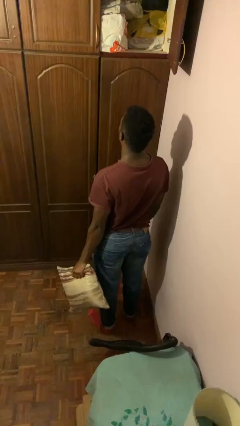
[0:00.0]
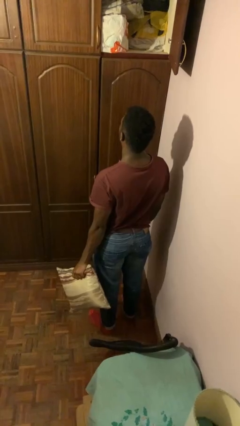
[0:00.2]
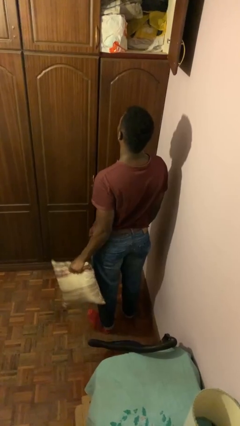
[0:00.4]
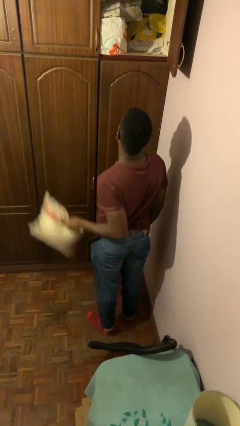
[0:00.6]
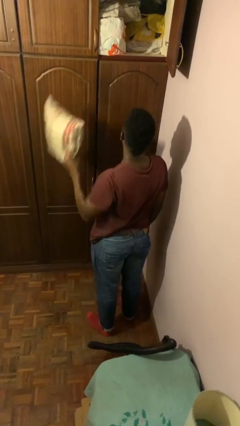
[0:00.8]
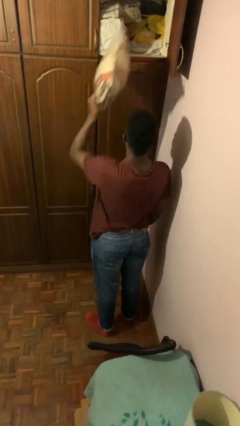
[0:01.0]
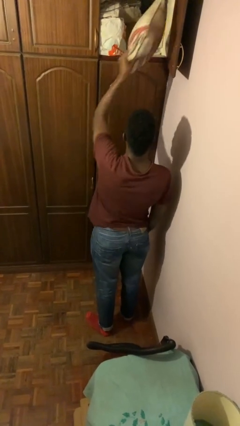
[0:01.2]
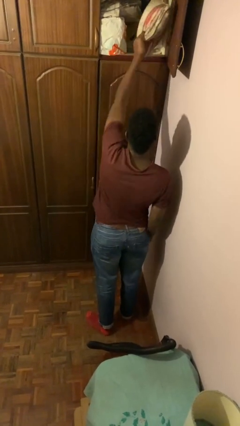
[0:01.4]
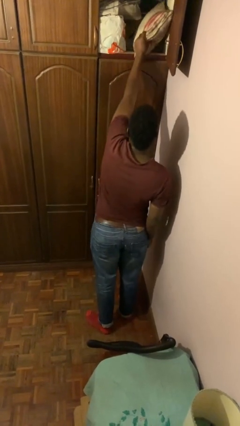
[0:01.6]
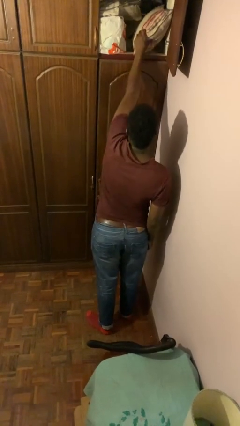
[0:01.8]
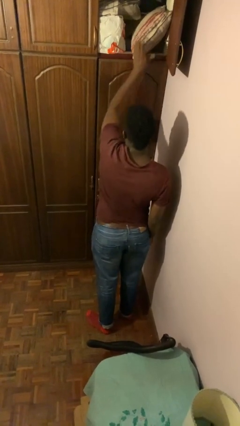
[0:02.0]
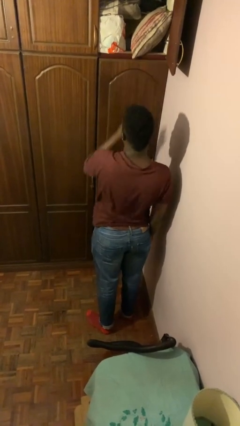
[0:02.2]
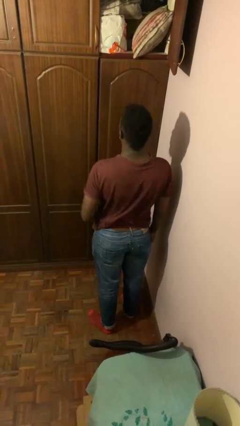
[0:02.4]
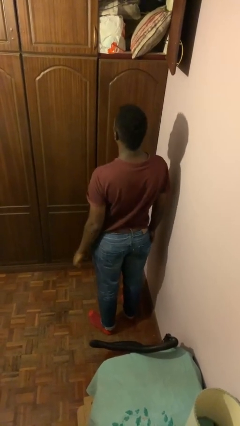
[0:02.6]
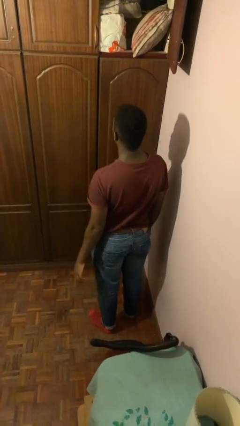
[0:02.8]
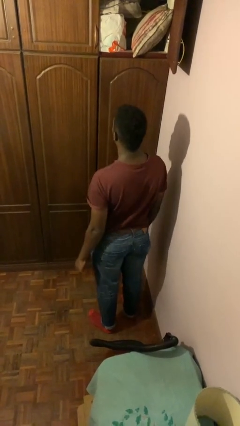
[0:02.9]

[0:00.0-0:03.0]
person puts down object on shelf

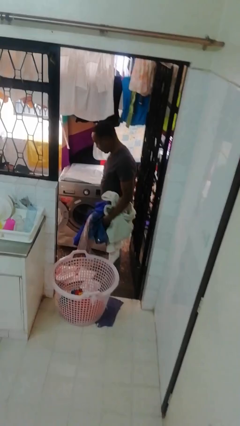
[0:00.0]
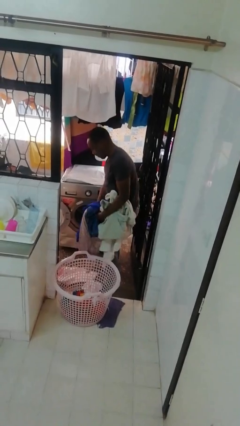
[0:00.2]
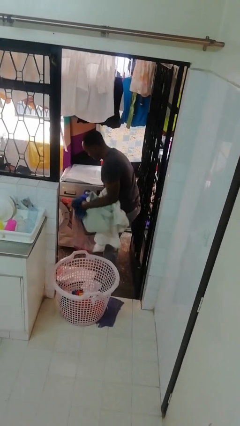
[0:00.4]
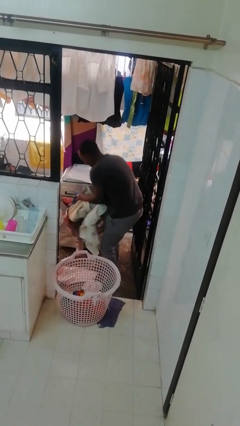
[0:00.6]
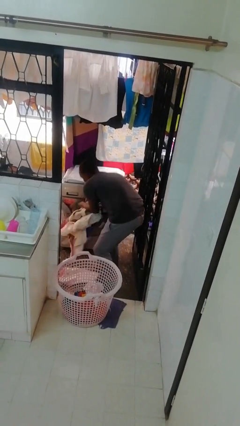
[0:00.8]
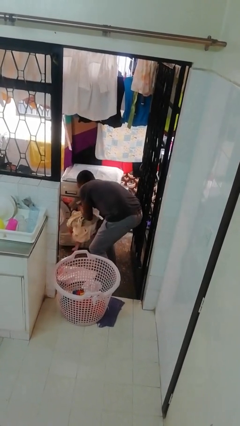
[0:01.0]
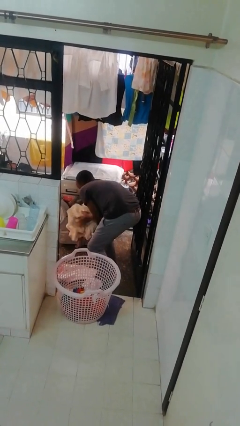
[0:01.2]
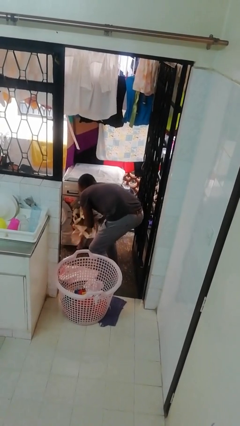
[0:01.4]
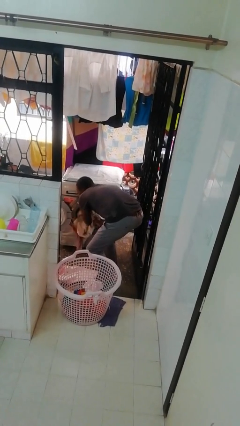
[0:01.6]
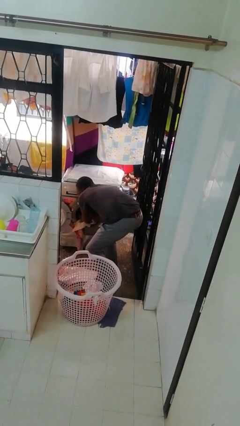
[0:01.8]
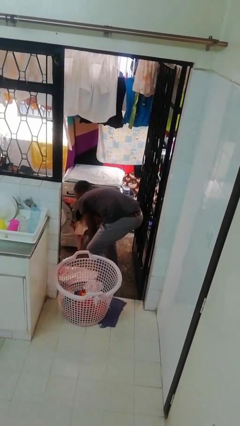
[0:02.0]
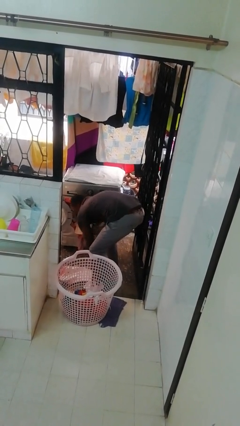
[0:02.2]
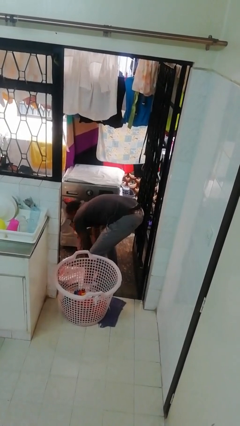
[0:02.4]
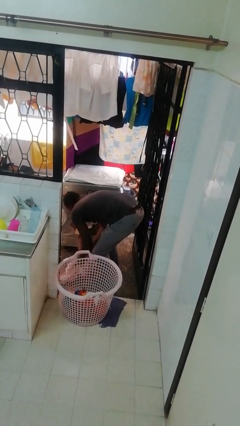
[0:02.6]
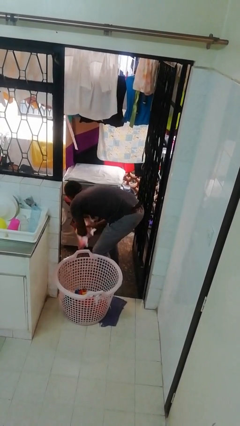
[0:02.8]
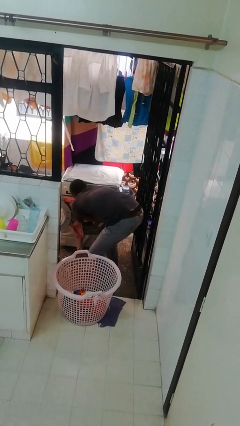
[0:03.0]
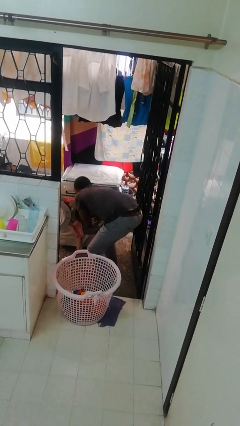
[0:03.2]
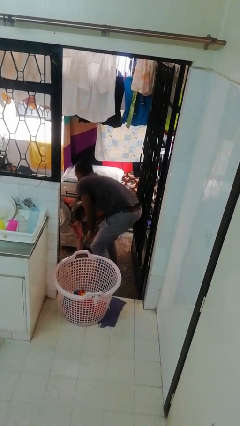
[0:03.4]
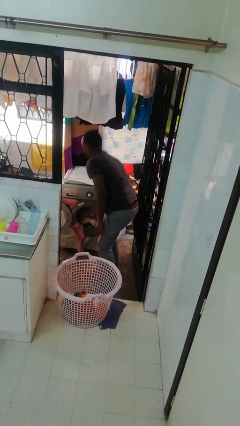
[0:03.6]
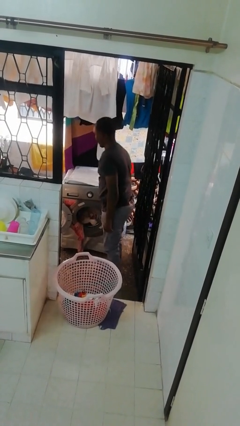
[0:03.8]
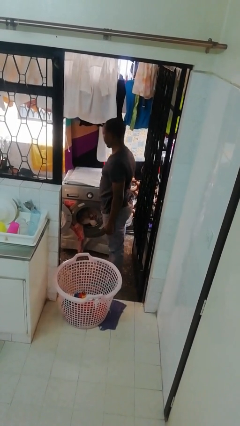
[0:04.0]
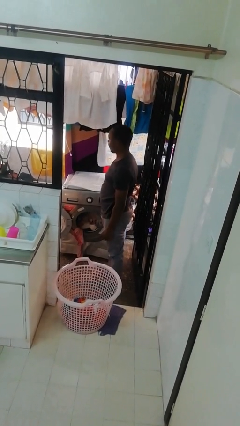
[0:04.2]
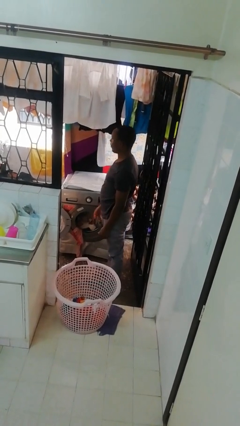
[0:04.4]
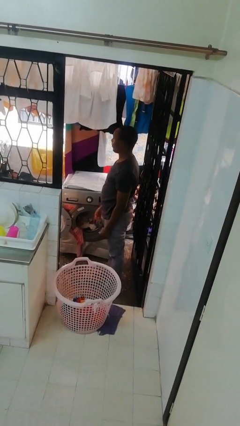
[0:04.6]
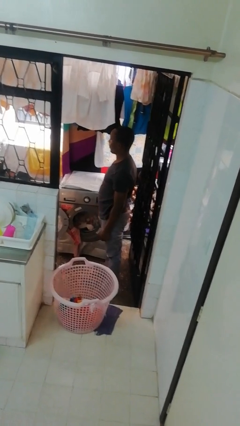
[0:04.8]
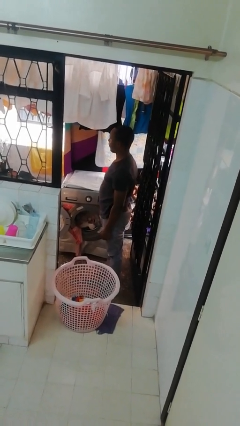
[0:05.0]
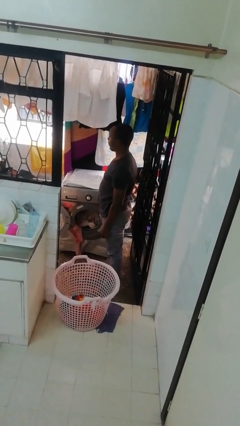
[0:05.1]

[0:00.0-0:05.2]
person loads clotheswasher

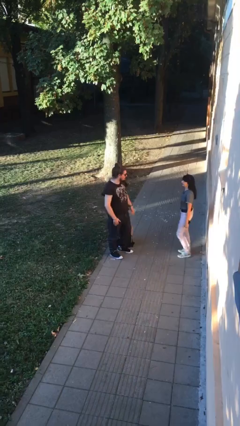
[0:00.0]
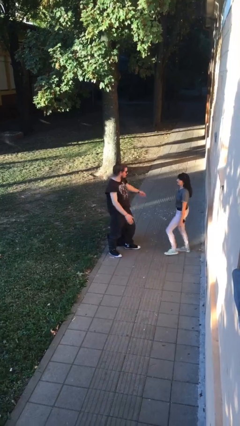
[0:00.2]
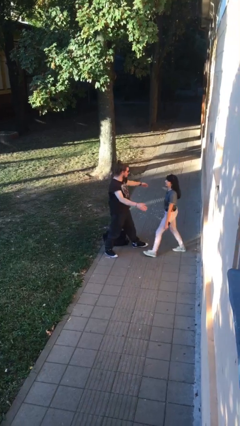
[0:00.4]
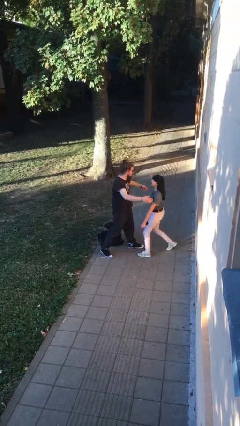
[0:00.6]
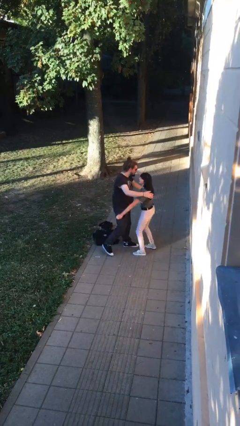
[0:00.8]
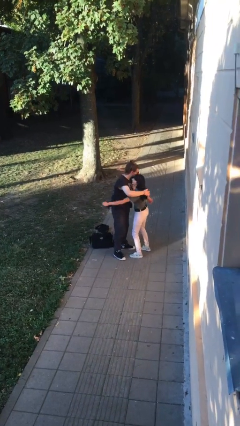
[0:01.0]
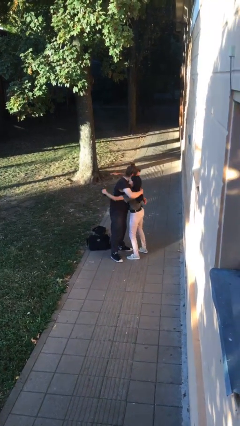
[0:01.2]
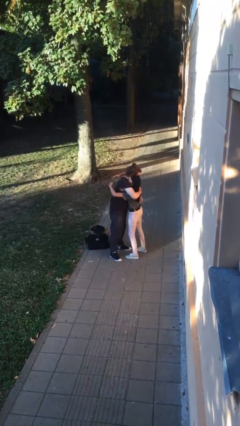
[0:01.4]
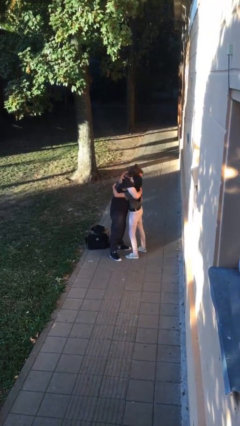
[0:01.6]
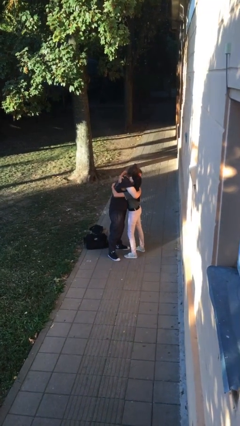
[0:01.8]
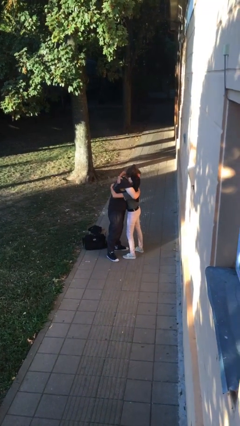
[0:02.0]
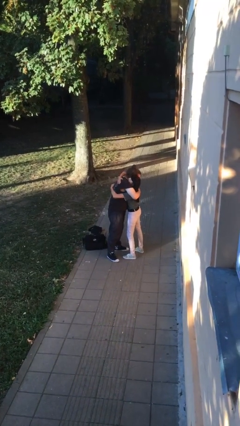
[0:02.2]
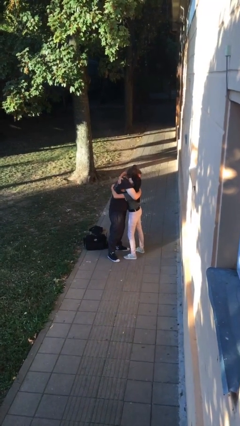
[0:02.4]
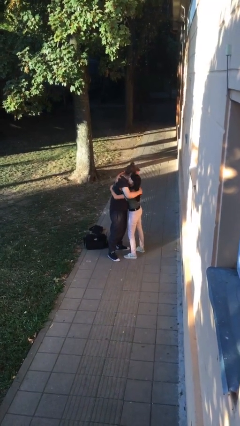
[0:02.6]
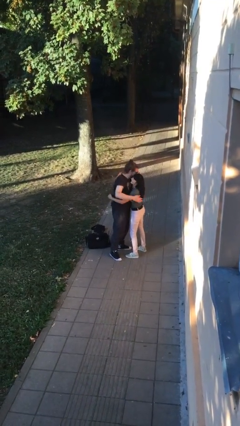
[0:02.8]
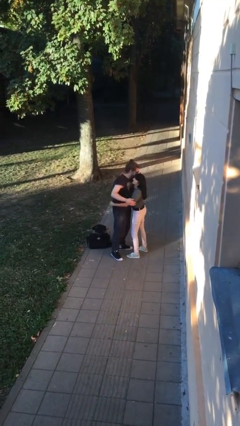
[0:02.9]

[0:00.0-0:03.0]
person embraces person

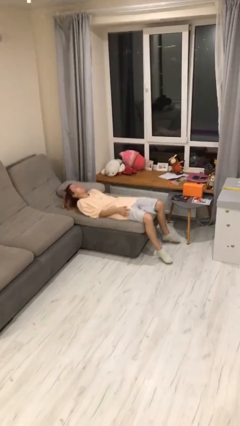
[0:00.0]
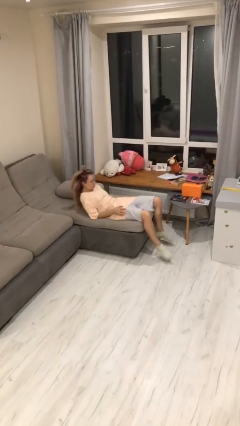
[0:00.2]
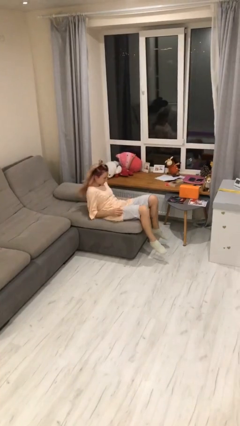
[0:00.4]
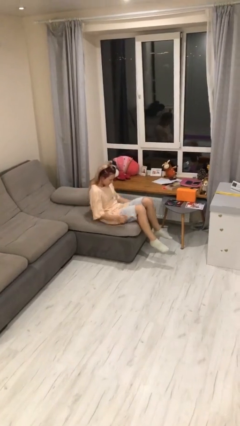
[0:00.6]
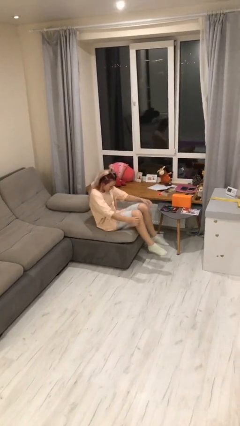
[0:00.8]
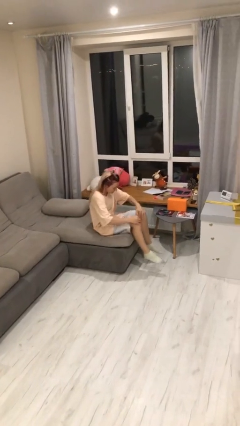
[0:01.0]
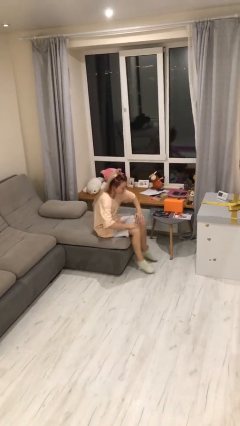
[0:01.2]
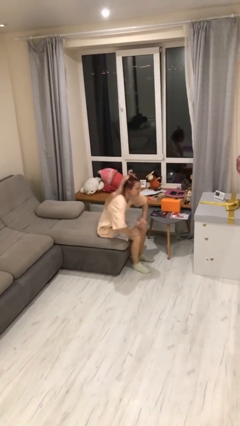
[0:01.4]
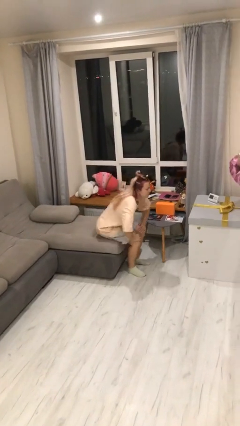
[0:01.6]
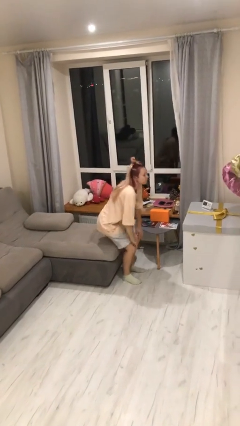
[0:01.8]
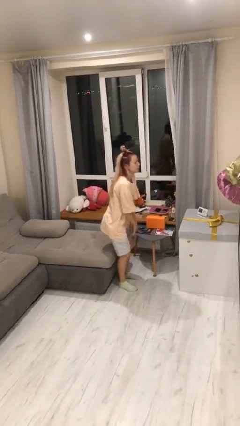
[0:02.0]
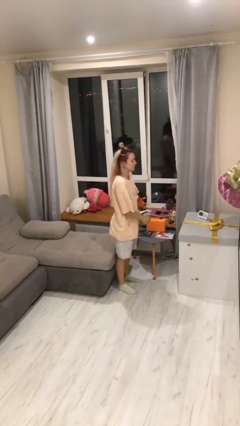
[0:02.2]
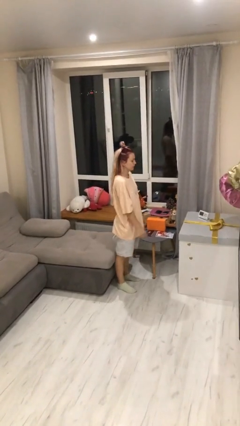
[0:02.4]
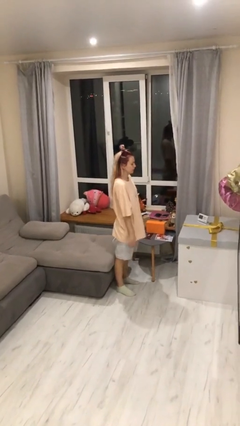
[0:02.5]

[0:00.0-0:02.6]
person stands up

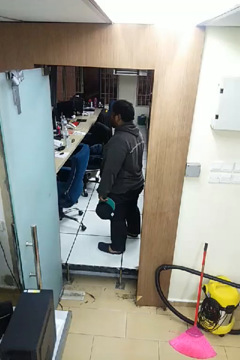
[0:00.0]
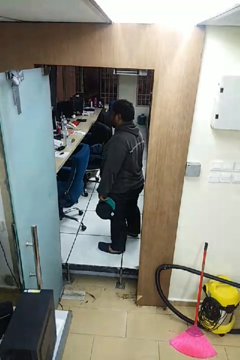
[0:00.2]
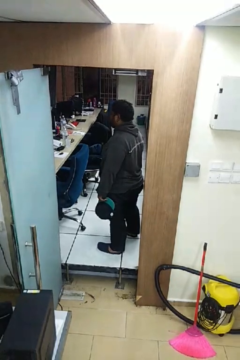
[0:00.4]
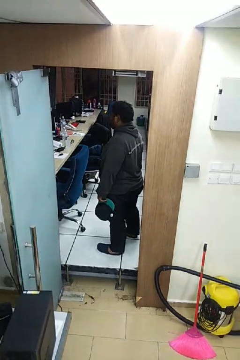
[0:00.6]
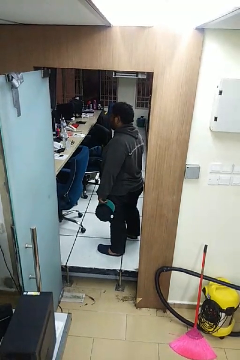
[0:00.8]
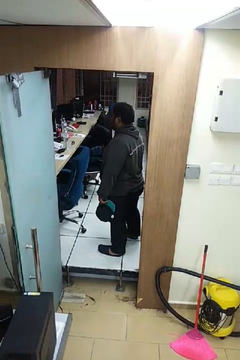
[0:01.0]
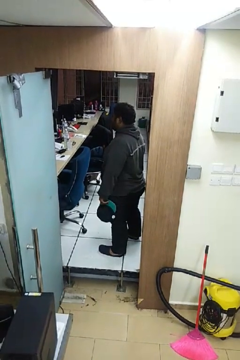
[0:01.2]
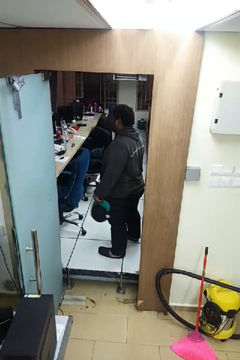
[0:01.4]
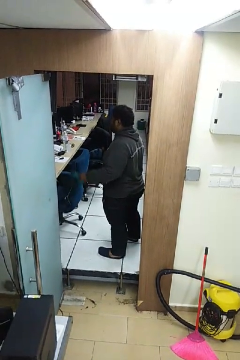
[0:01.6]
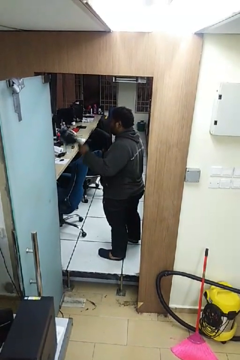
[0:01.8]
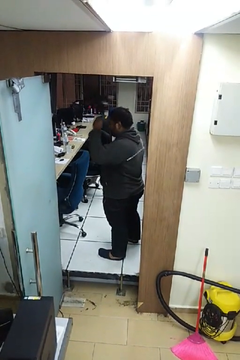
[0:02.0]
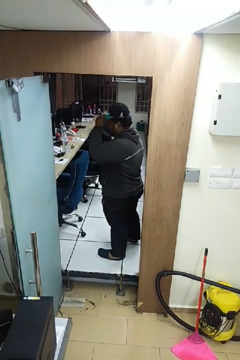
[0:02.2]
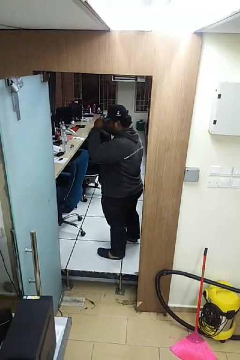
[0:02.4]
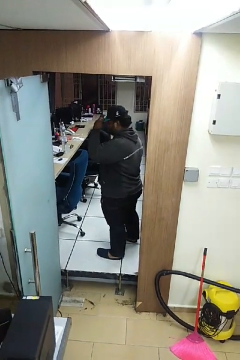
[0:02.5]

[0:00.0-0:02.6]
person puts on hat

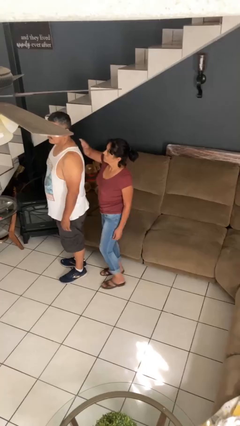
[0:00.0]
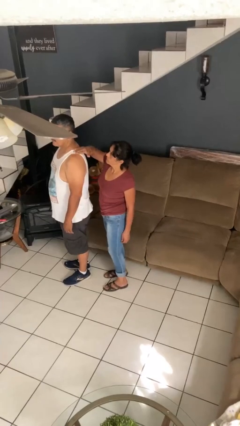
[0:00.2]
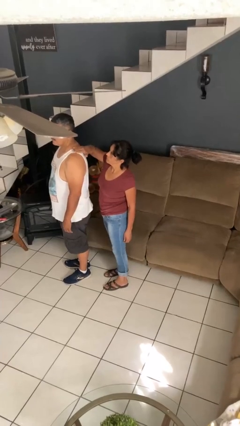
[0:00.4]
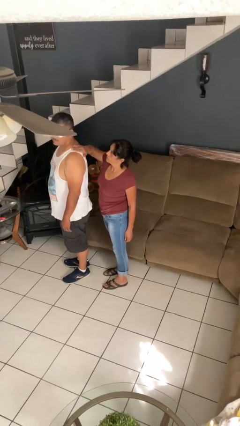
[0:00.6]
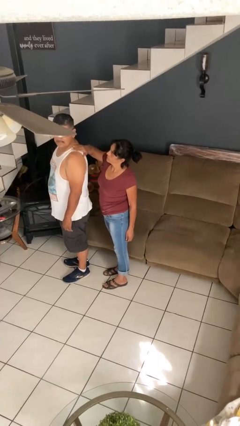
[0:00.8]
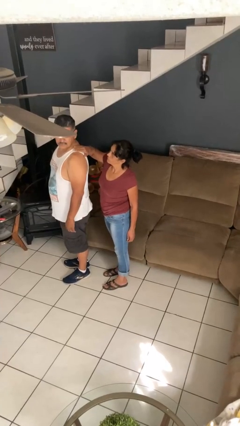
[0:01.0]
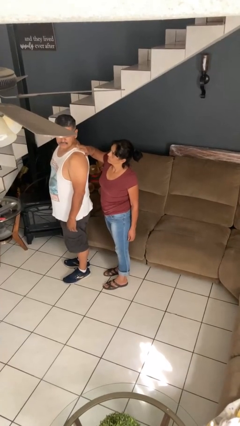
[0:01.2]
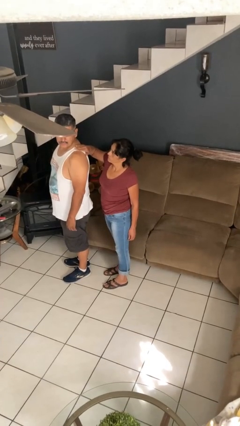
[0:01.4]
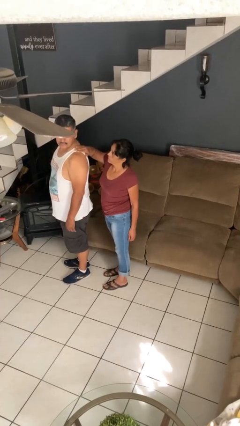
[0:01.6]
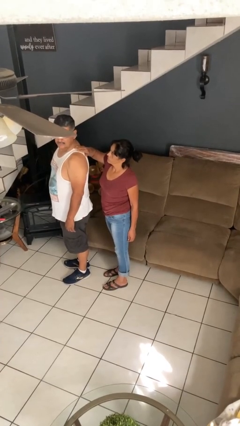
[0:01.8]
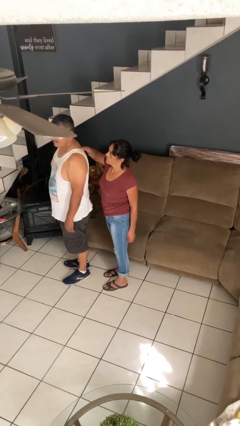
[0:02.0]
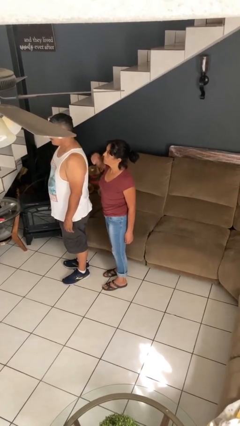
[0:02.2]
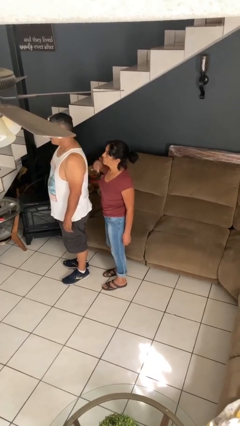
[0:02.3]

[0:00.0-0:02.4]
person touches back of person
